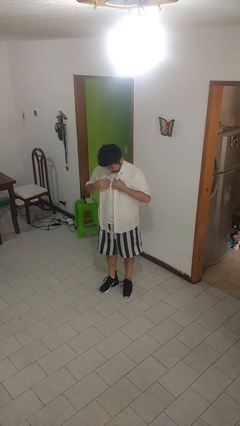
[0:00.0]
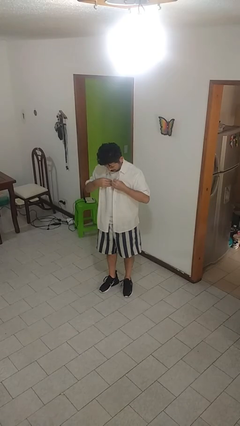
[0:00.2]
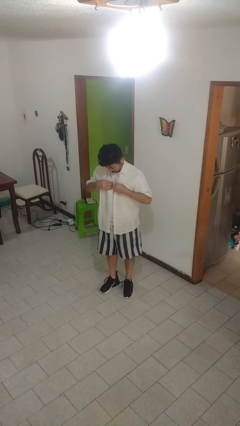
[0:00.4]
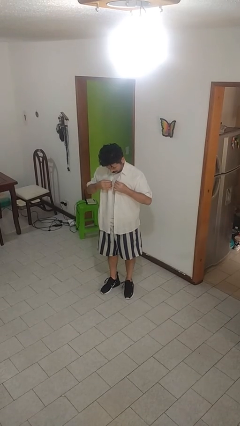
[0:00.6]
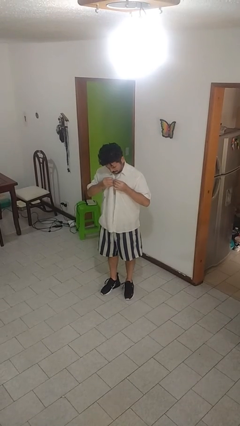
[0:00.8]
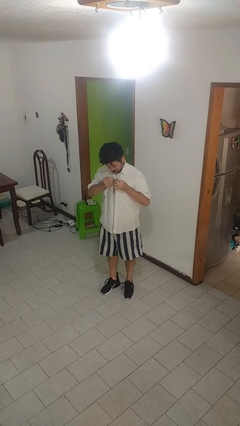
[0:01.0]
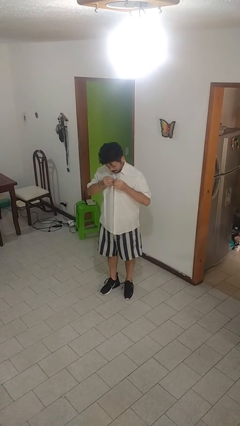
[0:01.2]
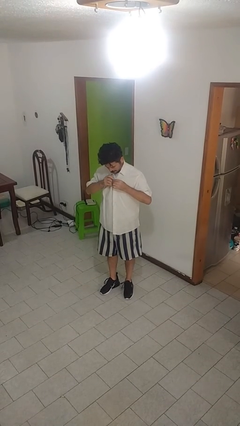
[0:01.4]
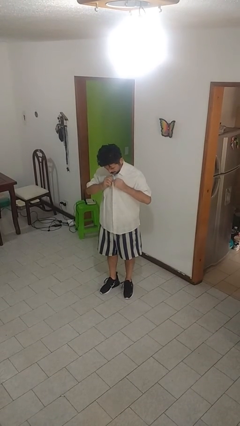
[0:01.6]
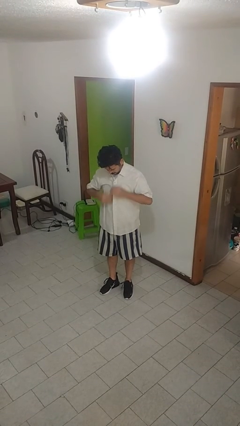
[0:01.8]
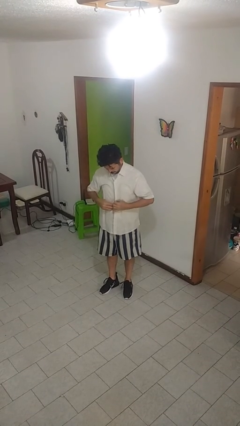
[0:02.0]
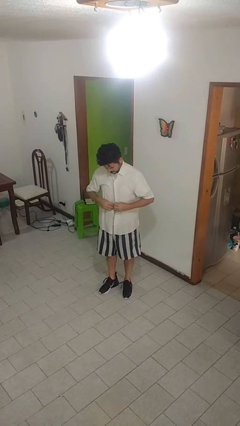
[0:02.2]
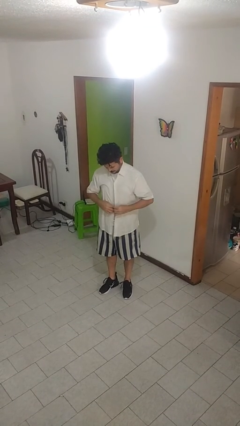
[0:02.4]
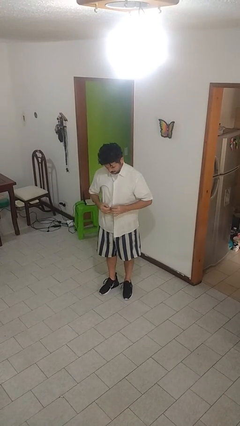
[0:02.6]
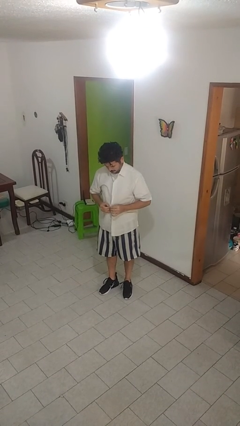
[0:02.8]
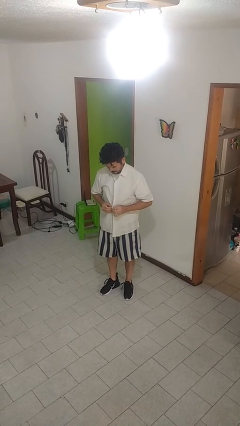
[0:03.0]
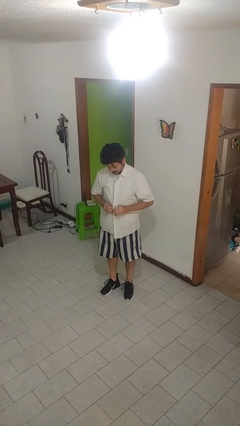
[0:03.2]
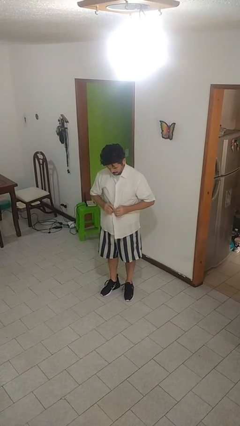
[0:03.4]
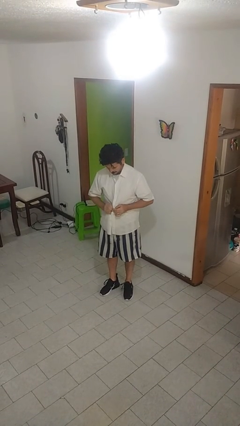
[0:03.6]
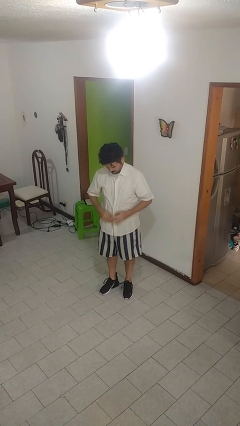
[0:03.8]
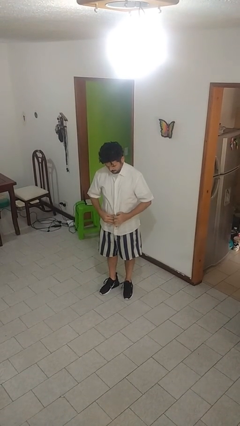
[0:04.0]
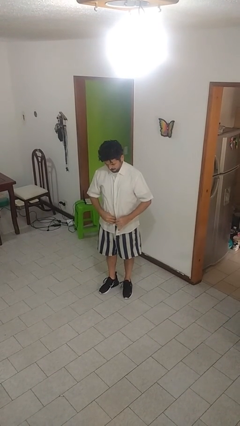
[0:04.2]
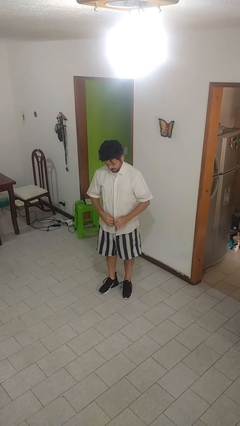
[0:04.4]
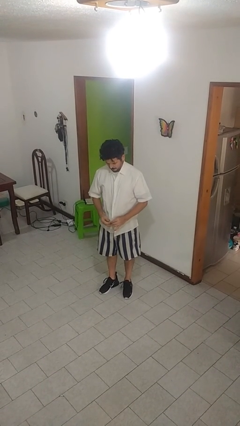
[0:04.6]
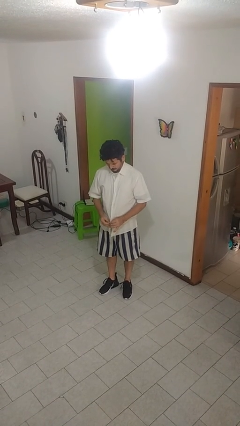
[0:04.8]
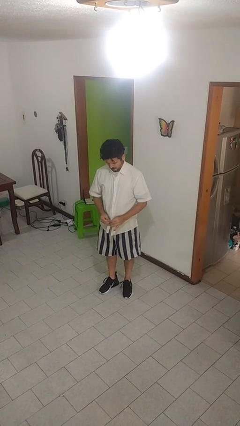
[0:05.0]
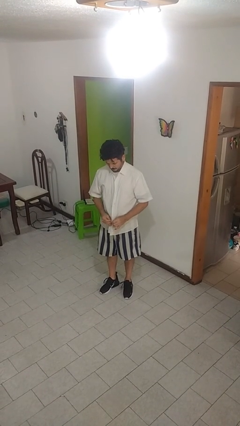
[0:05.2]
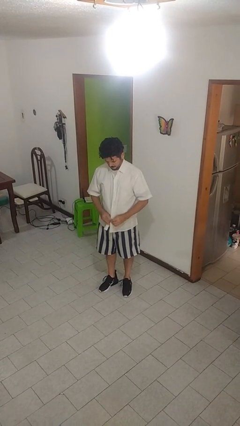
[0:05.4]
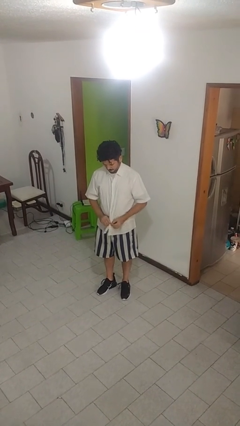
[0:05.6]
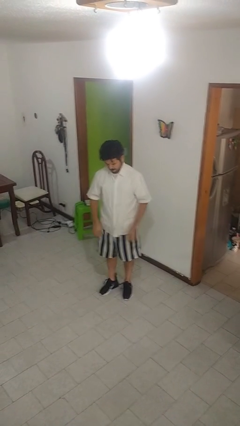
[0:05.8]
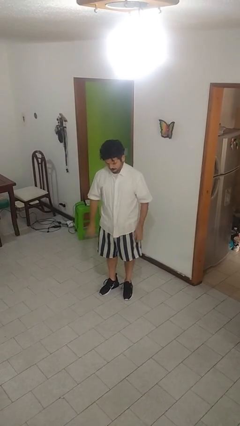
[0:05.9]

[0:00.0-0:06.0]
person buttons shirt

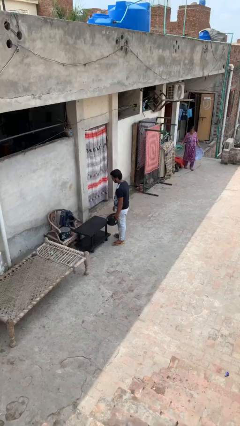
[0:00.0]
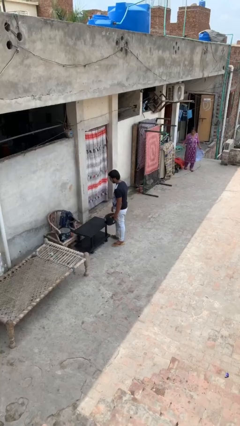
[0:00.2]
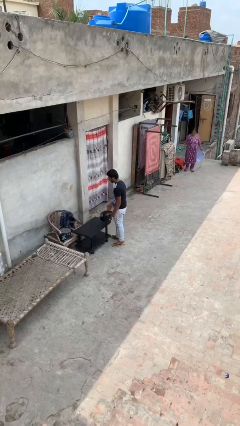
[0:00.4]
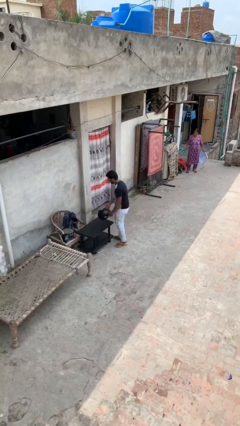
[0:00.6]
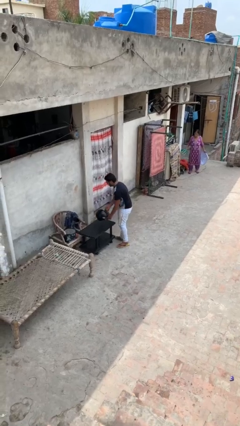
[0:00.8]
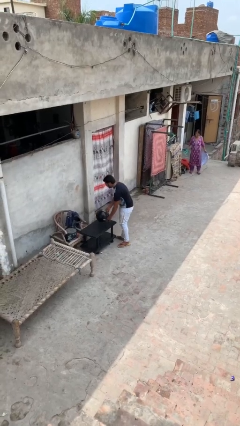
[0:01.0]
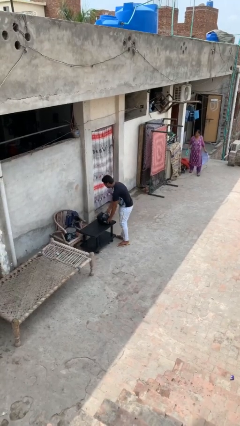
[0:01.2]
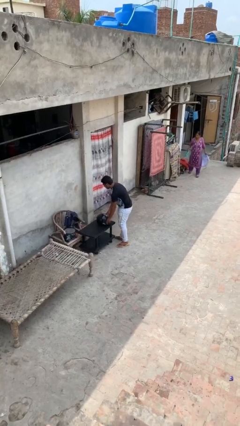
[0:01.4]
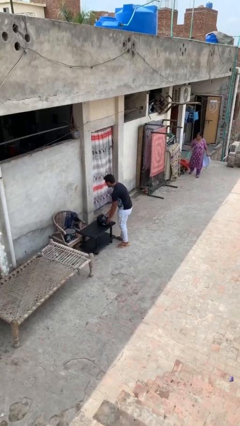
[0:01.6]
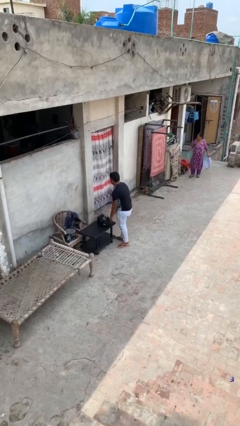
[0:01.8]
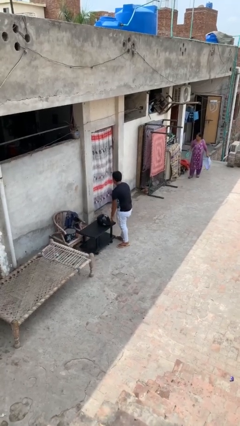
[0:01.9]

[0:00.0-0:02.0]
person puts down object on table

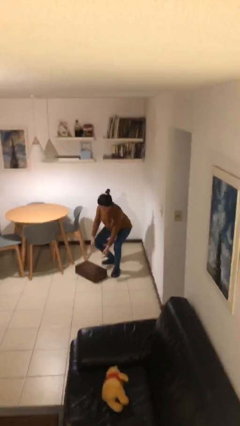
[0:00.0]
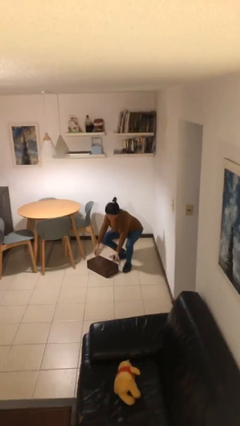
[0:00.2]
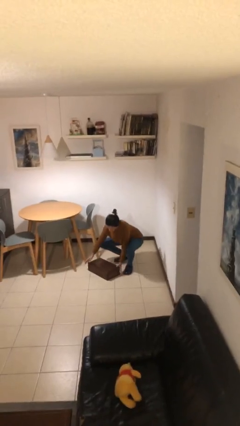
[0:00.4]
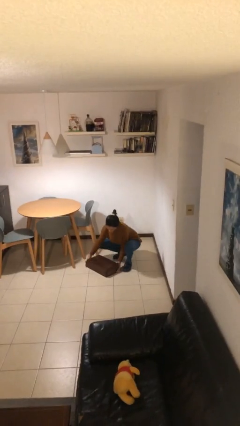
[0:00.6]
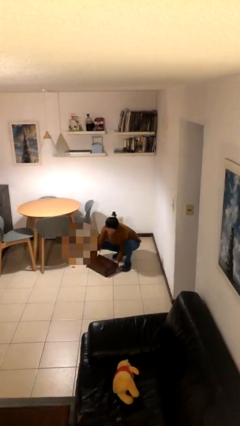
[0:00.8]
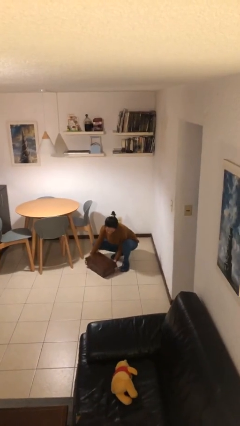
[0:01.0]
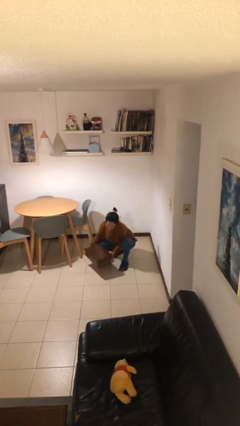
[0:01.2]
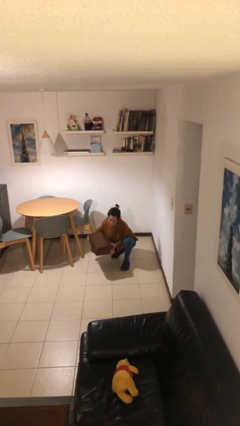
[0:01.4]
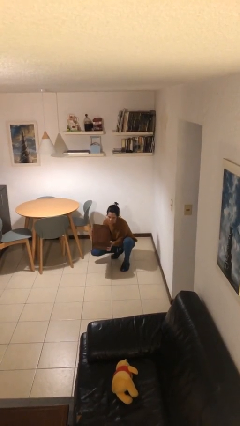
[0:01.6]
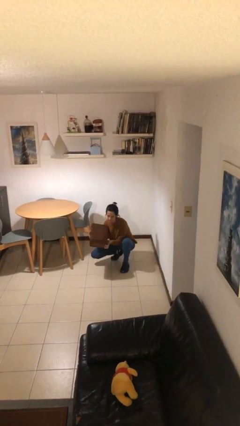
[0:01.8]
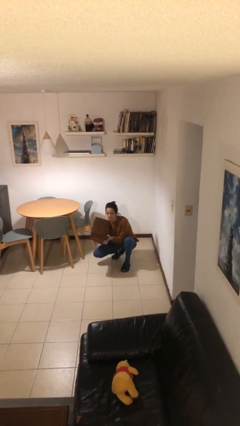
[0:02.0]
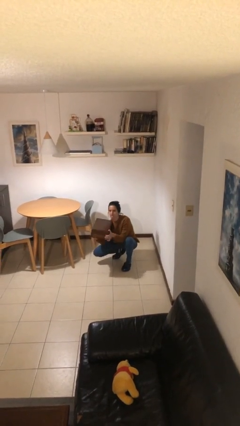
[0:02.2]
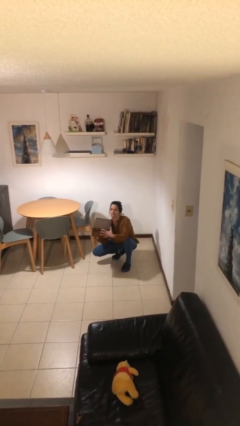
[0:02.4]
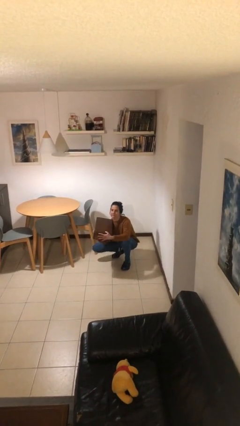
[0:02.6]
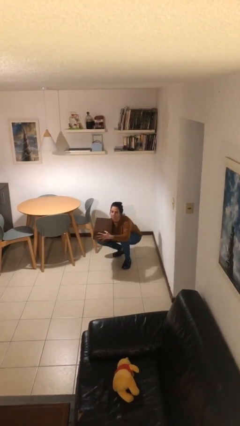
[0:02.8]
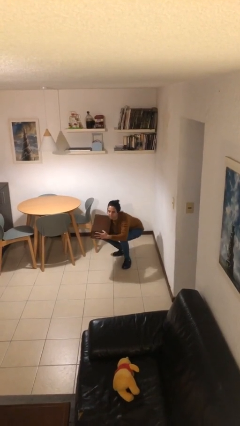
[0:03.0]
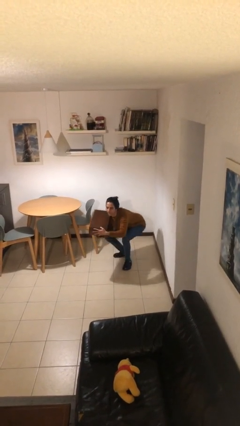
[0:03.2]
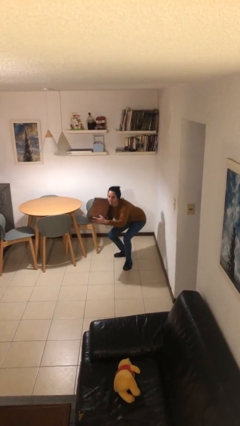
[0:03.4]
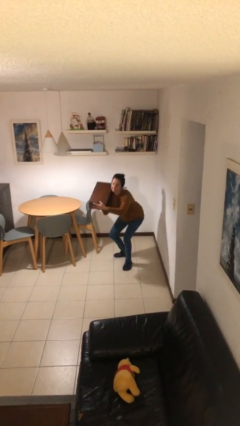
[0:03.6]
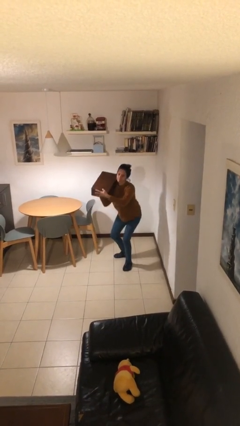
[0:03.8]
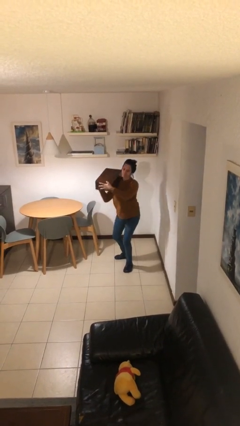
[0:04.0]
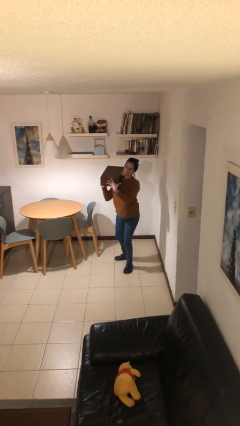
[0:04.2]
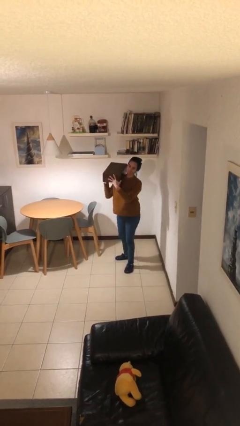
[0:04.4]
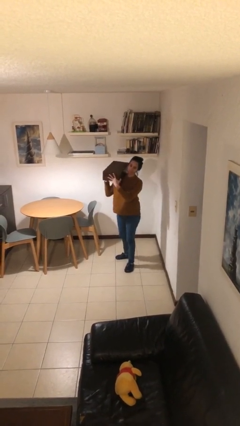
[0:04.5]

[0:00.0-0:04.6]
person picks up object from floor

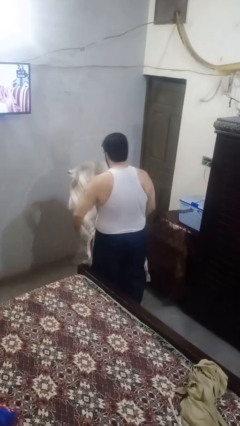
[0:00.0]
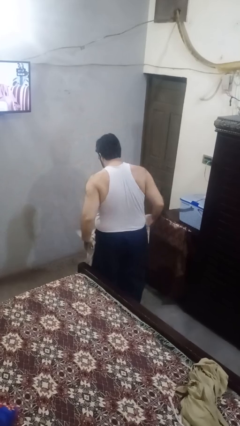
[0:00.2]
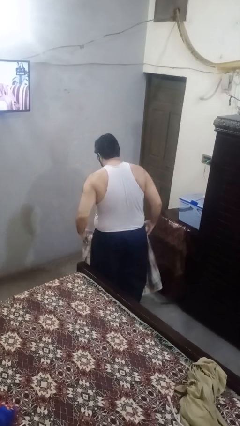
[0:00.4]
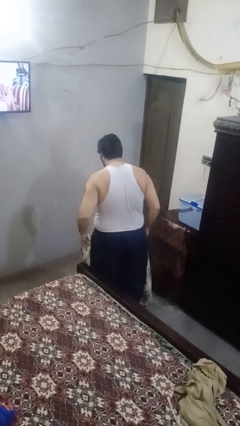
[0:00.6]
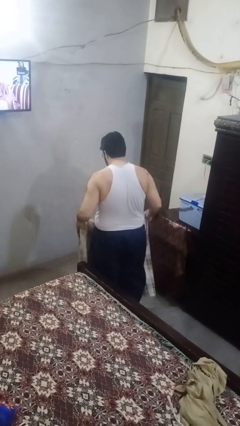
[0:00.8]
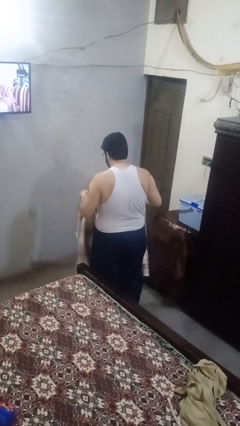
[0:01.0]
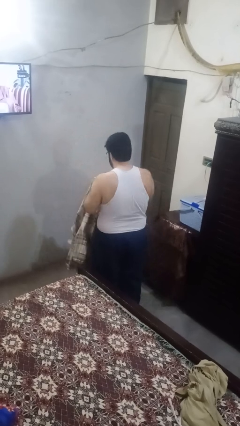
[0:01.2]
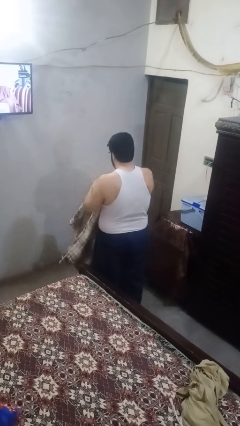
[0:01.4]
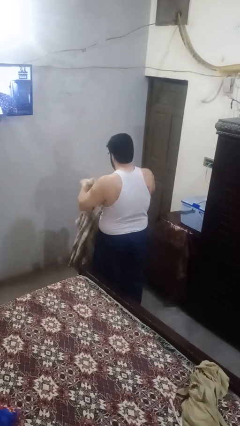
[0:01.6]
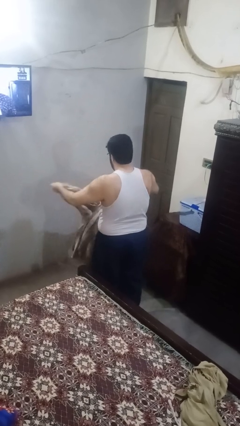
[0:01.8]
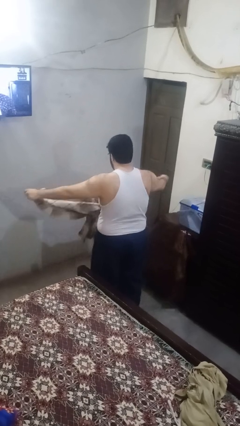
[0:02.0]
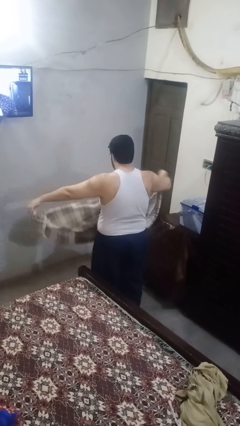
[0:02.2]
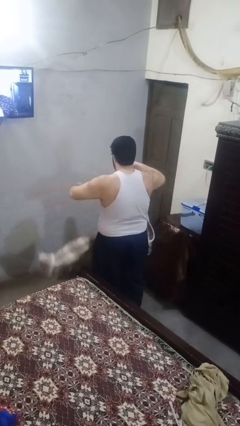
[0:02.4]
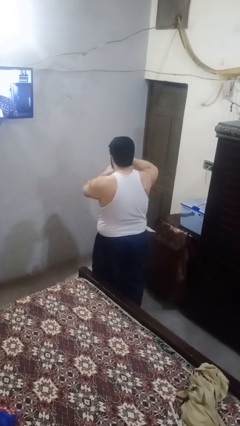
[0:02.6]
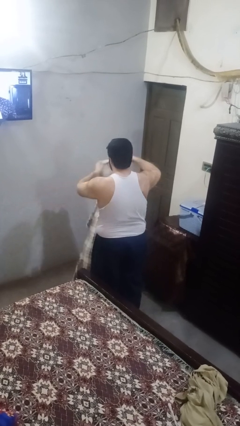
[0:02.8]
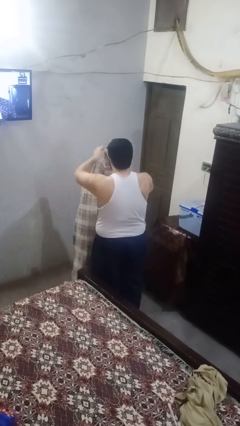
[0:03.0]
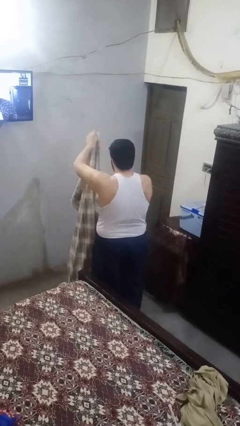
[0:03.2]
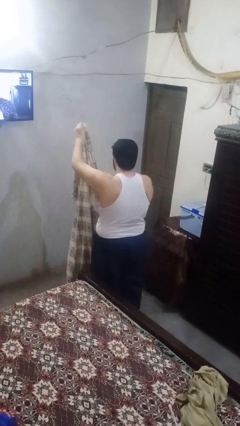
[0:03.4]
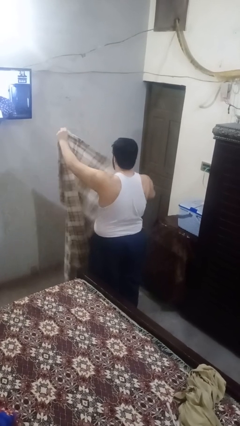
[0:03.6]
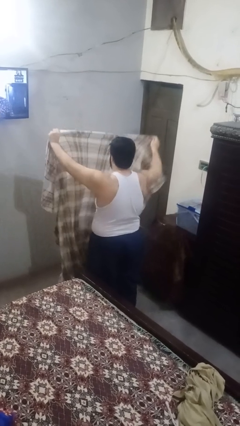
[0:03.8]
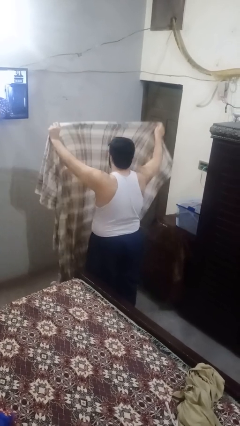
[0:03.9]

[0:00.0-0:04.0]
person unfolds blanket

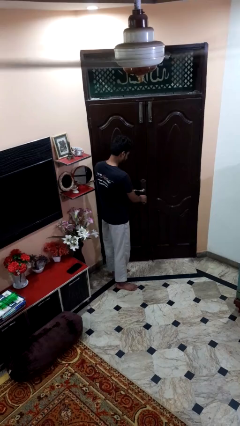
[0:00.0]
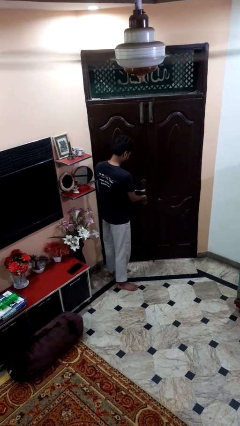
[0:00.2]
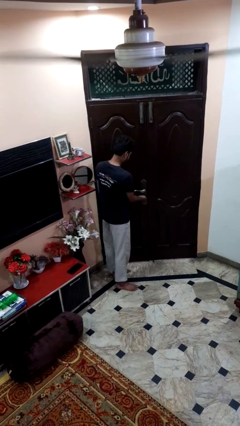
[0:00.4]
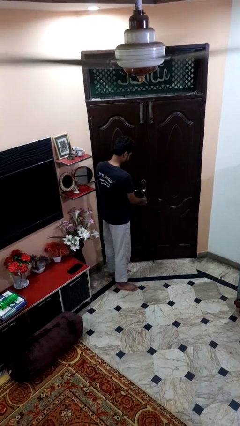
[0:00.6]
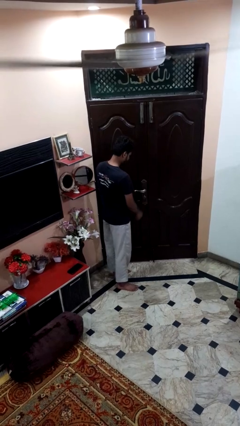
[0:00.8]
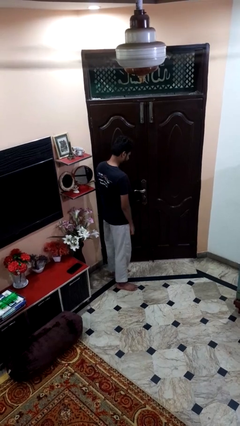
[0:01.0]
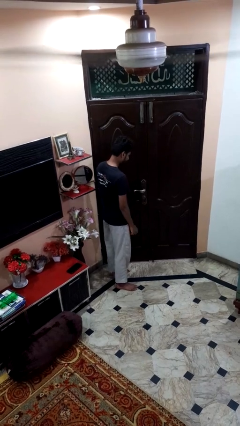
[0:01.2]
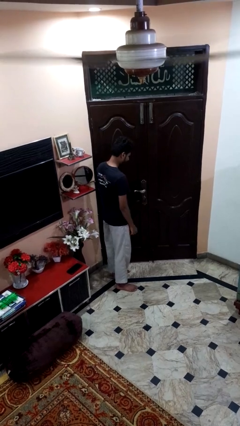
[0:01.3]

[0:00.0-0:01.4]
person locks door with keys
